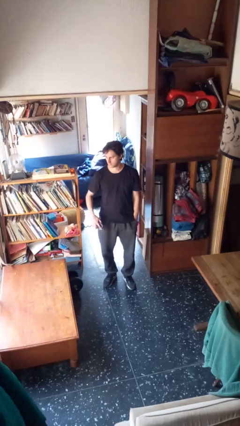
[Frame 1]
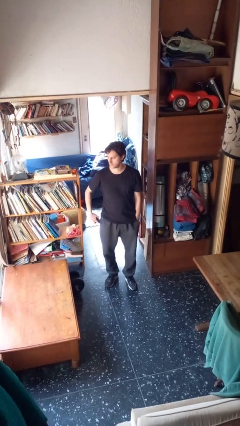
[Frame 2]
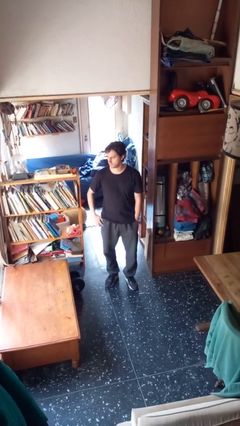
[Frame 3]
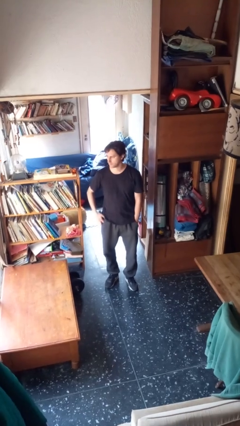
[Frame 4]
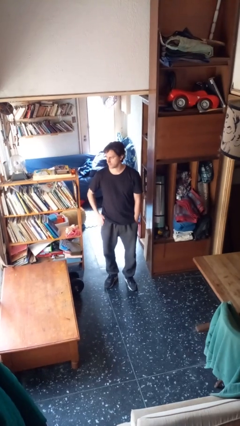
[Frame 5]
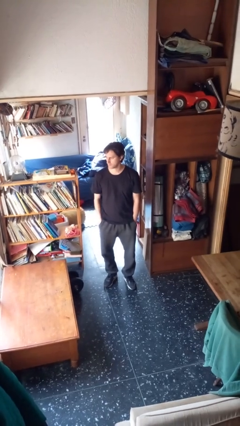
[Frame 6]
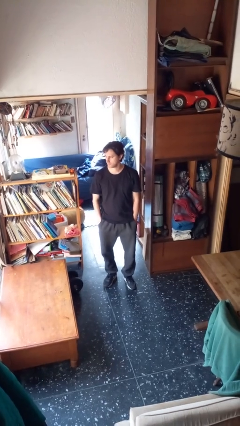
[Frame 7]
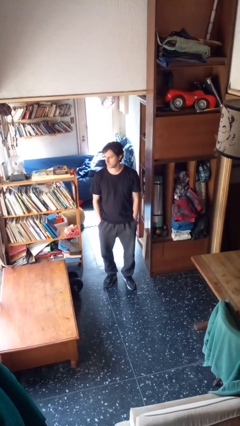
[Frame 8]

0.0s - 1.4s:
person puts phone into pocket

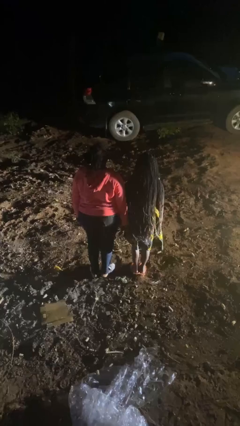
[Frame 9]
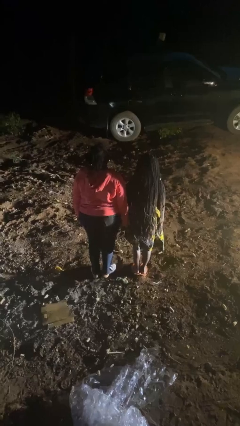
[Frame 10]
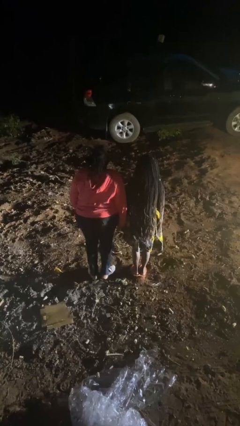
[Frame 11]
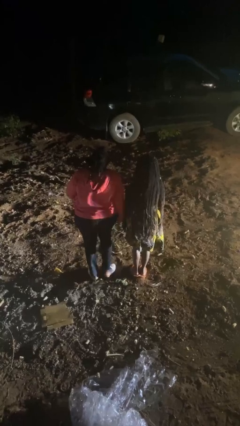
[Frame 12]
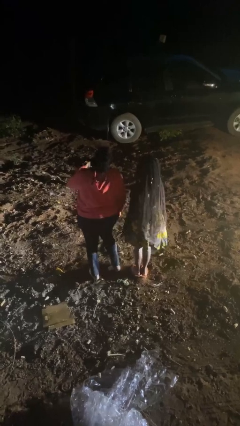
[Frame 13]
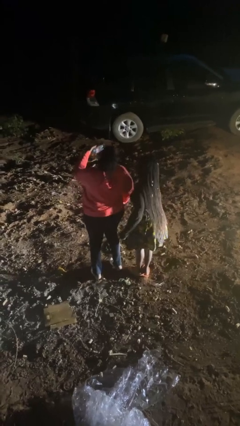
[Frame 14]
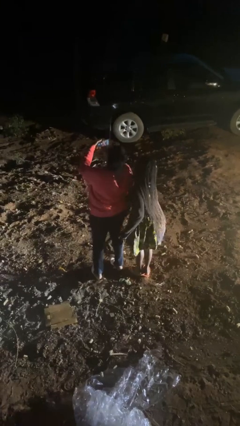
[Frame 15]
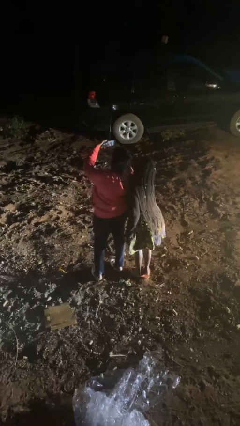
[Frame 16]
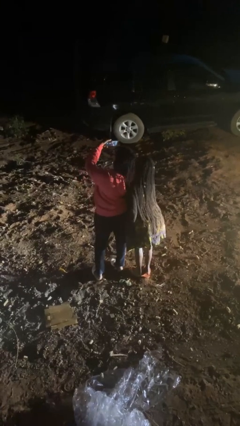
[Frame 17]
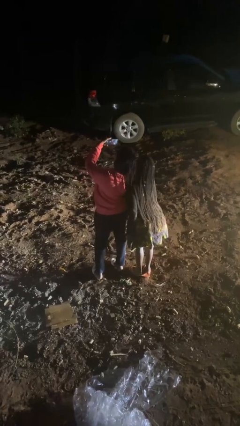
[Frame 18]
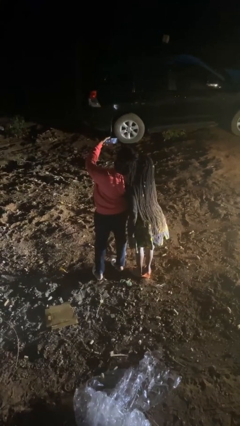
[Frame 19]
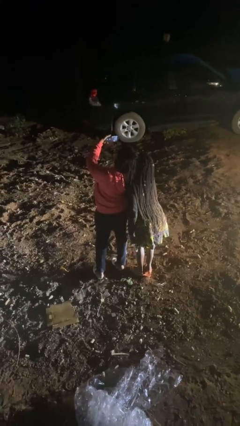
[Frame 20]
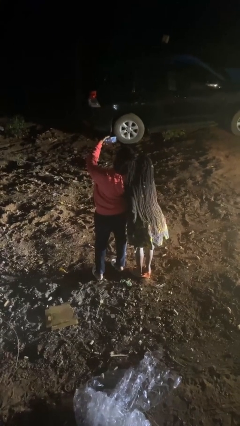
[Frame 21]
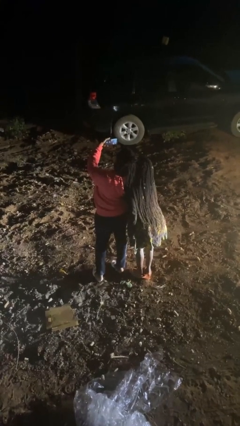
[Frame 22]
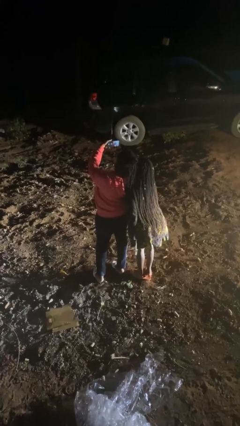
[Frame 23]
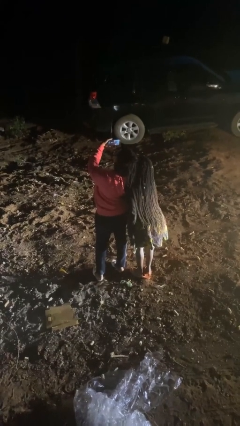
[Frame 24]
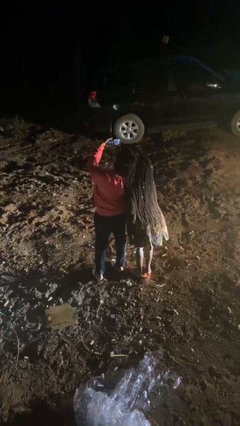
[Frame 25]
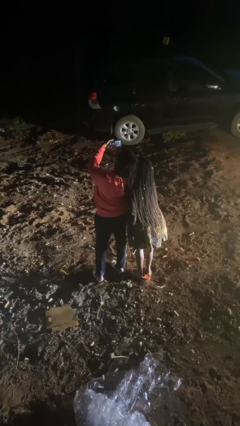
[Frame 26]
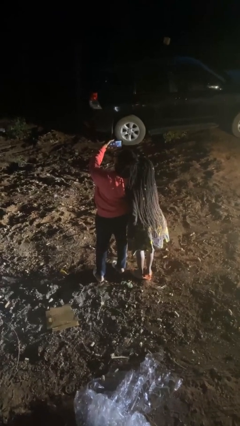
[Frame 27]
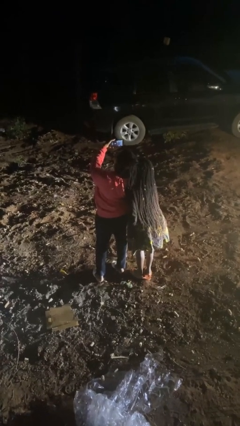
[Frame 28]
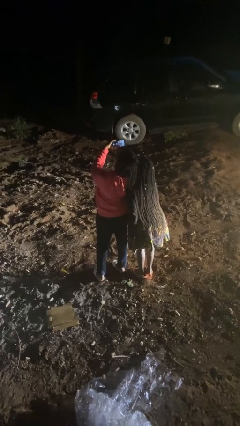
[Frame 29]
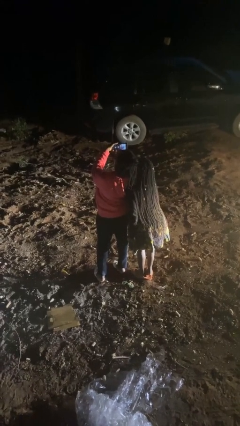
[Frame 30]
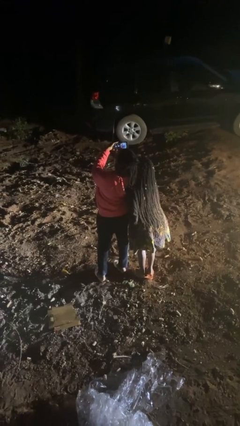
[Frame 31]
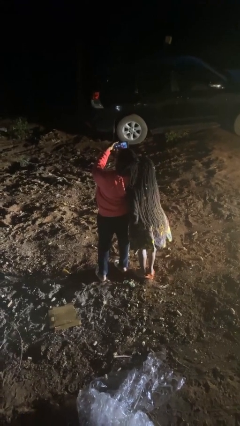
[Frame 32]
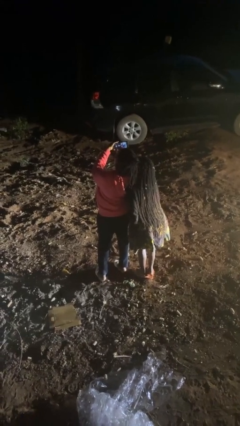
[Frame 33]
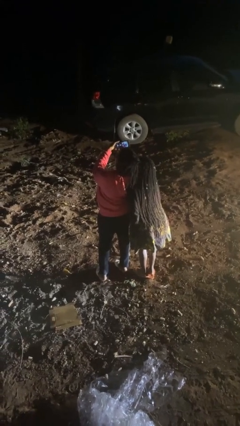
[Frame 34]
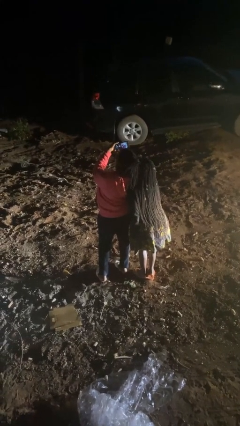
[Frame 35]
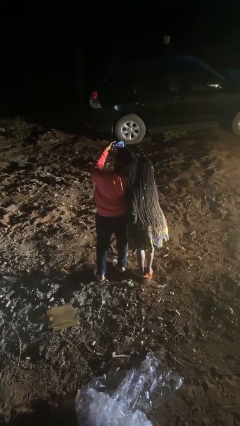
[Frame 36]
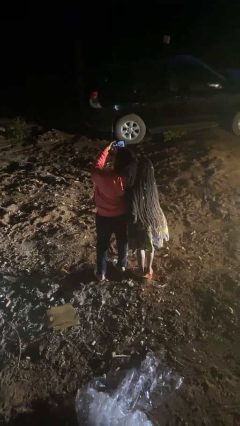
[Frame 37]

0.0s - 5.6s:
person takes selfie with person

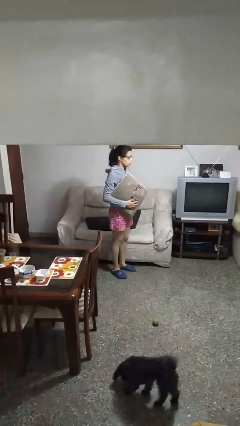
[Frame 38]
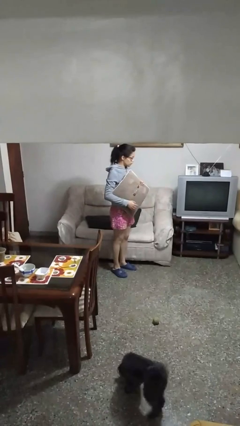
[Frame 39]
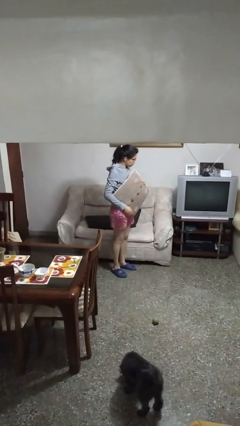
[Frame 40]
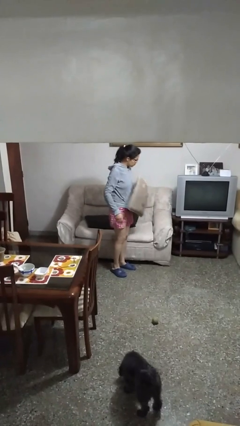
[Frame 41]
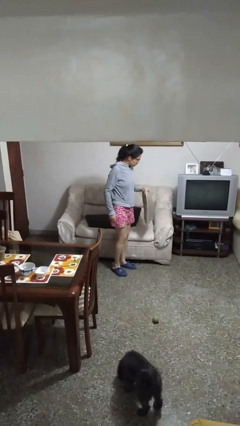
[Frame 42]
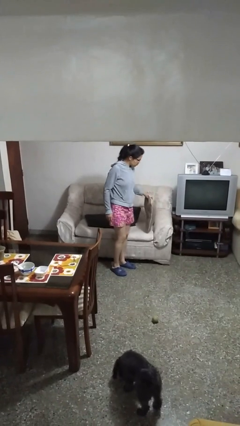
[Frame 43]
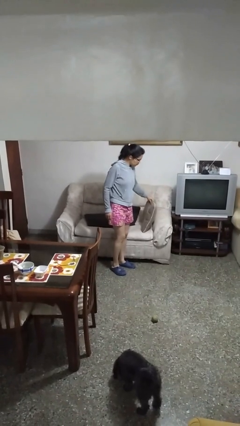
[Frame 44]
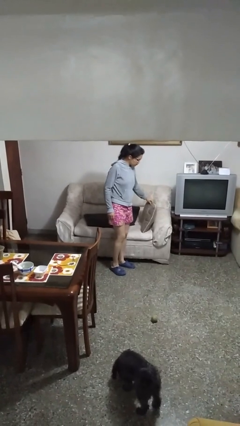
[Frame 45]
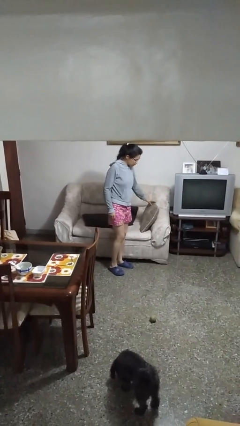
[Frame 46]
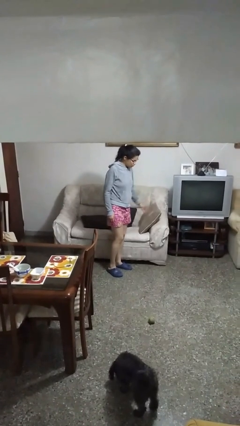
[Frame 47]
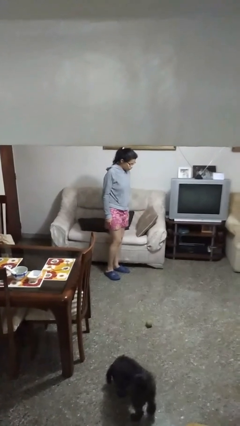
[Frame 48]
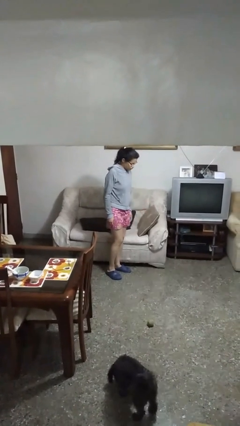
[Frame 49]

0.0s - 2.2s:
person puts down object on couch

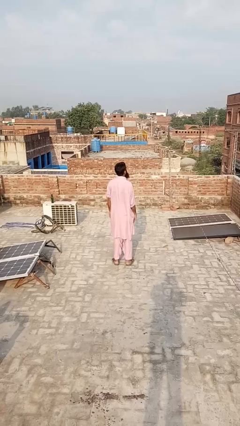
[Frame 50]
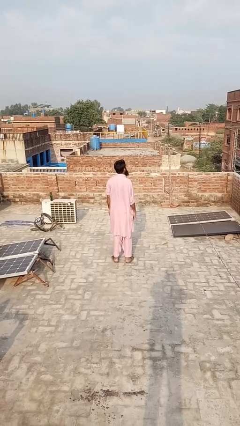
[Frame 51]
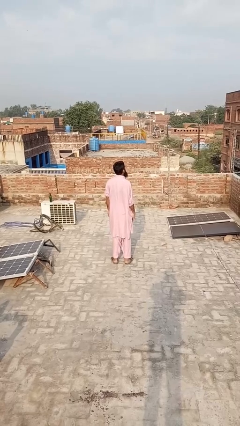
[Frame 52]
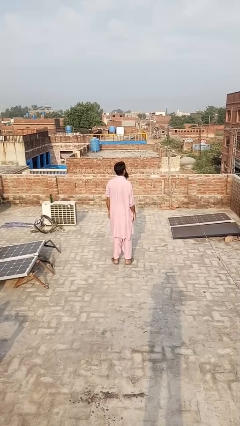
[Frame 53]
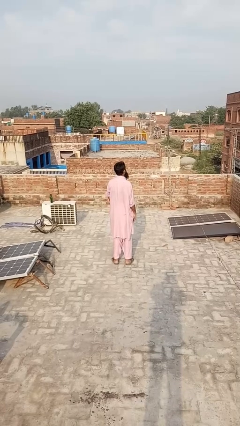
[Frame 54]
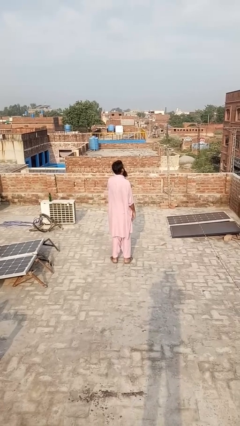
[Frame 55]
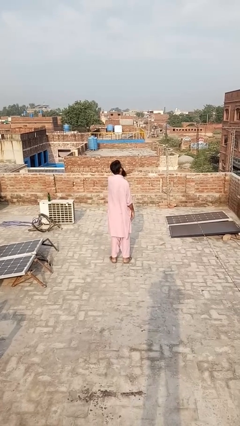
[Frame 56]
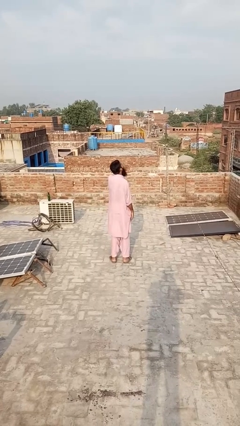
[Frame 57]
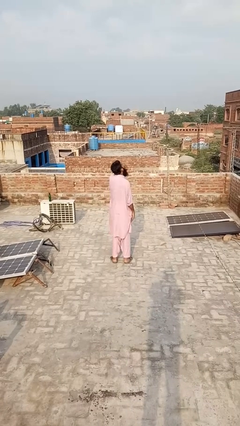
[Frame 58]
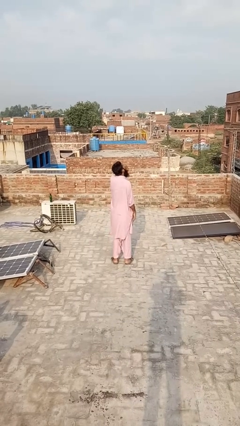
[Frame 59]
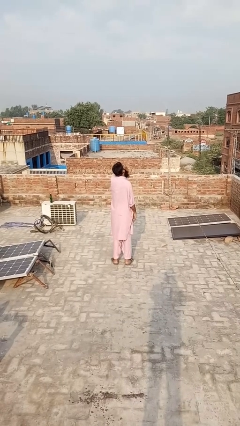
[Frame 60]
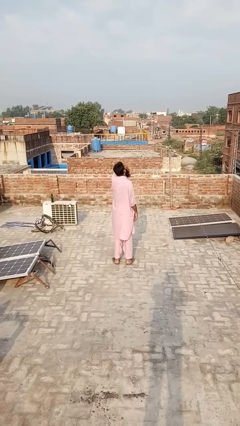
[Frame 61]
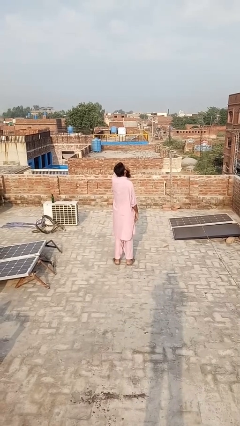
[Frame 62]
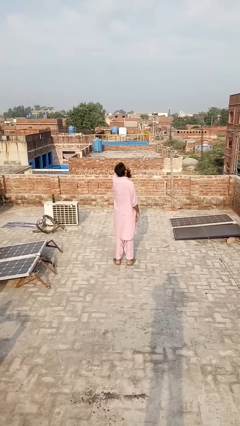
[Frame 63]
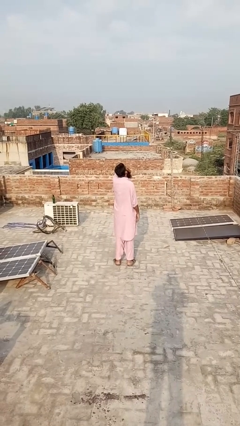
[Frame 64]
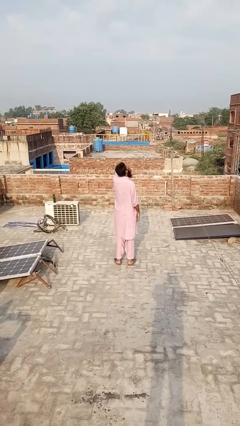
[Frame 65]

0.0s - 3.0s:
person yawns

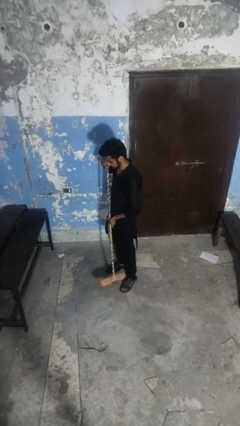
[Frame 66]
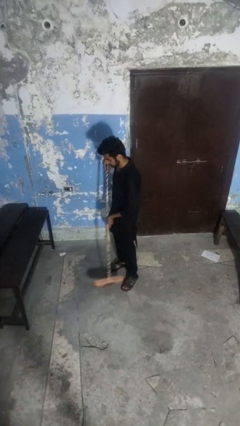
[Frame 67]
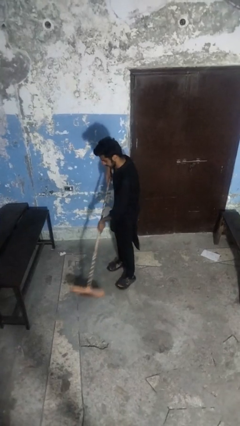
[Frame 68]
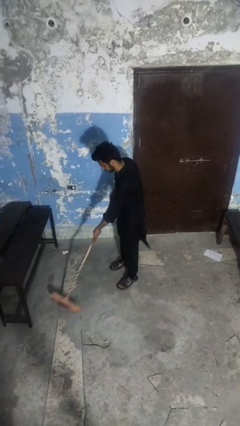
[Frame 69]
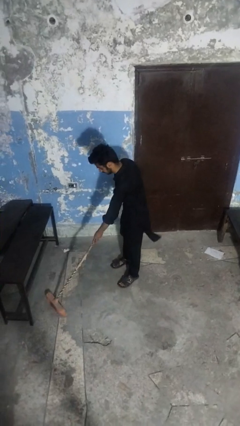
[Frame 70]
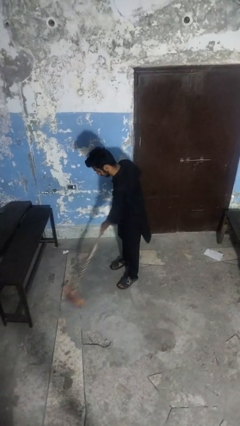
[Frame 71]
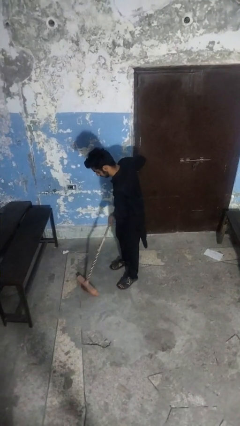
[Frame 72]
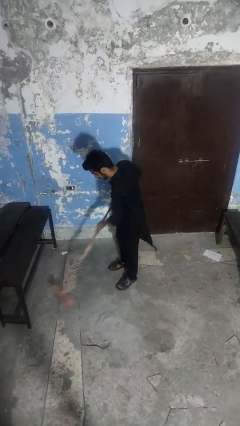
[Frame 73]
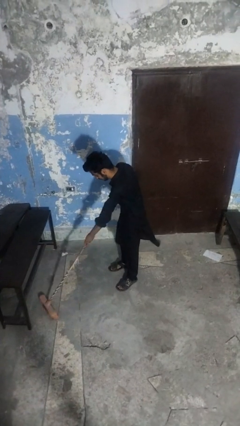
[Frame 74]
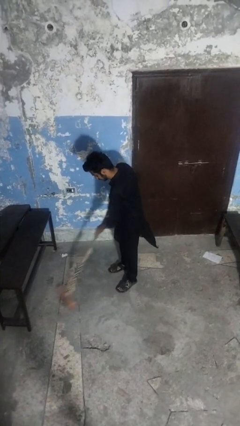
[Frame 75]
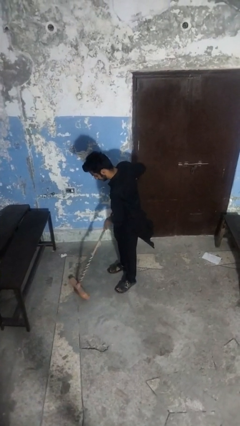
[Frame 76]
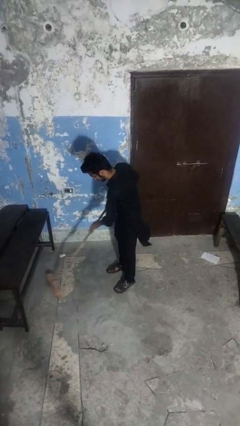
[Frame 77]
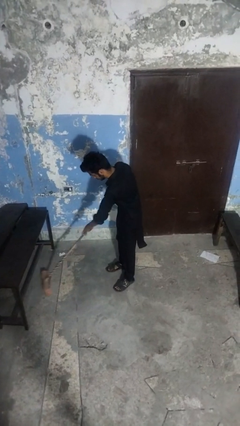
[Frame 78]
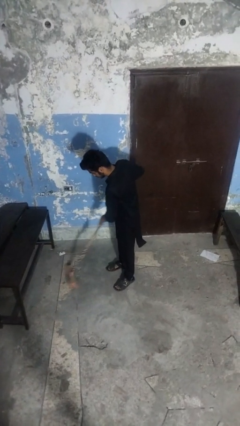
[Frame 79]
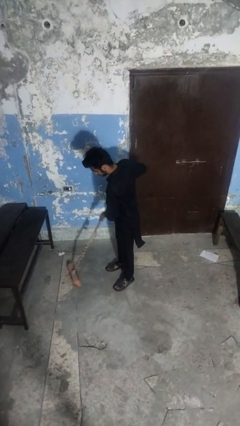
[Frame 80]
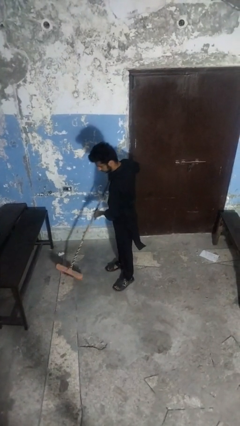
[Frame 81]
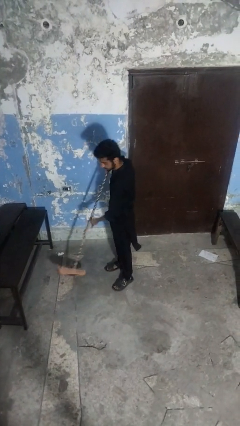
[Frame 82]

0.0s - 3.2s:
person sweeps floor

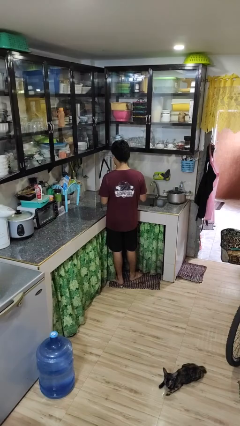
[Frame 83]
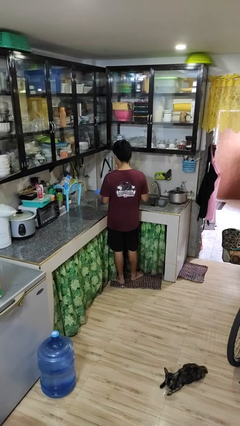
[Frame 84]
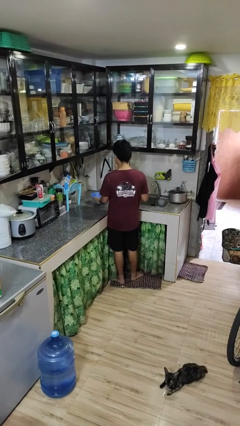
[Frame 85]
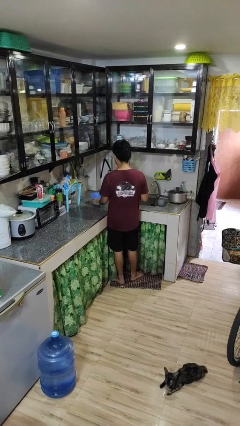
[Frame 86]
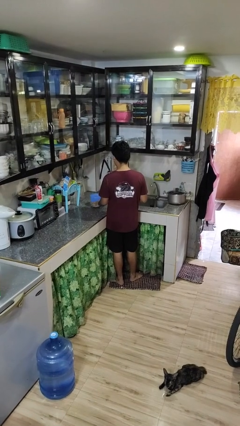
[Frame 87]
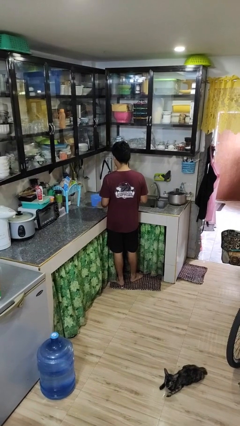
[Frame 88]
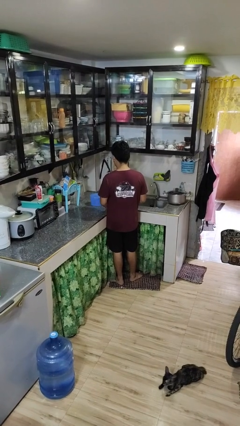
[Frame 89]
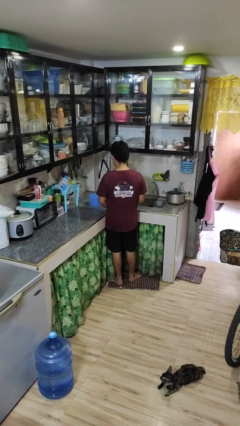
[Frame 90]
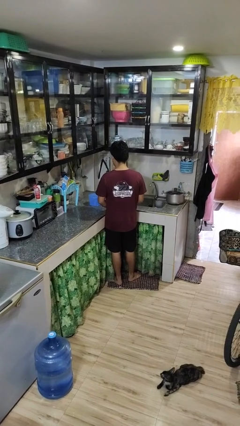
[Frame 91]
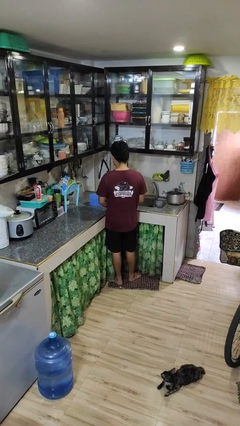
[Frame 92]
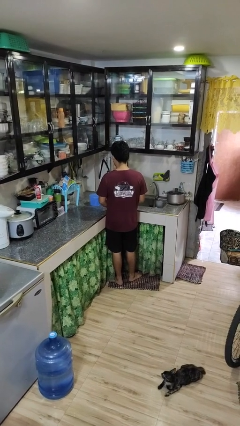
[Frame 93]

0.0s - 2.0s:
person puts down object on countertop

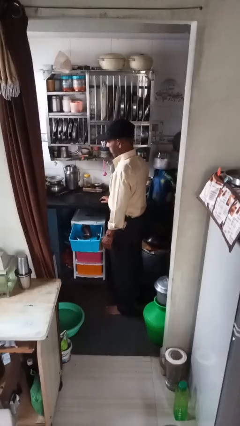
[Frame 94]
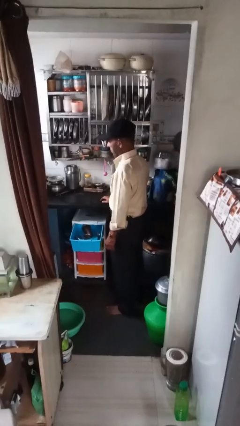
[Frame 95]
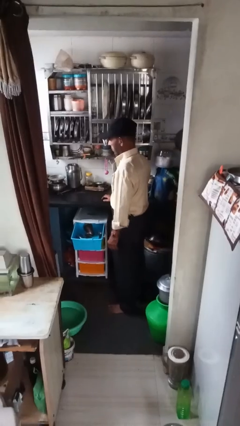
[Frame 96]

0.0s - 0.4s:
person opens kitchen drawer
